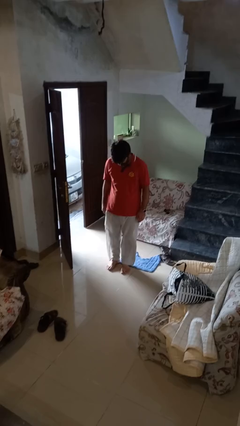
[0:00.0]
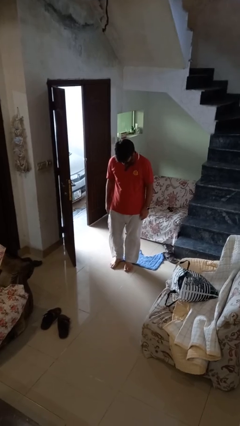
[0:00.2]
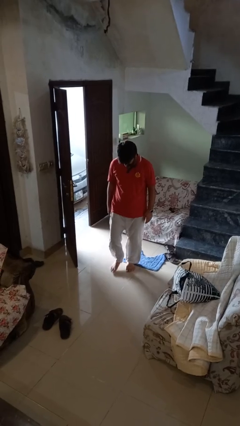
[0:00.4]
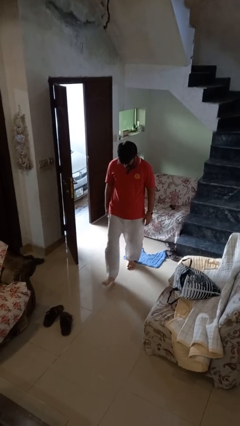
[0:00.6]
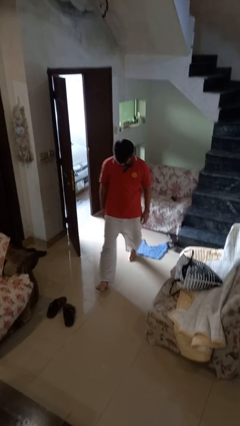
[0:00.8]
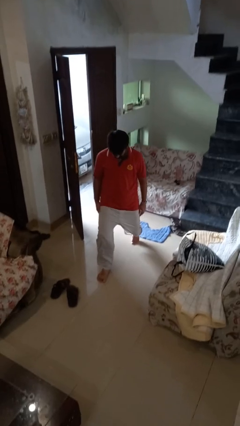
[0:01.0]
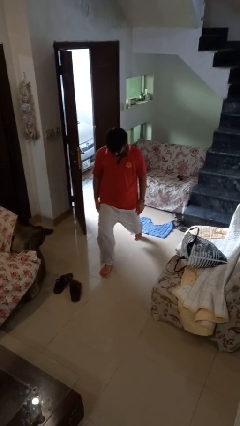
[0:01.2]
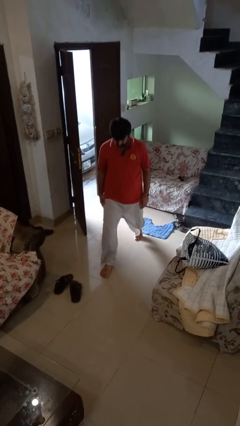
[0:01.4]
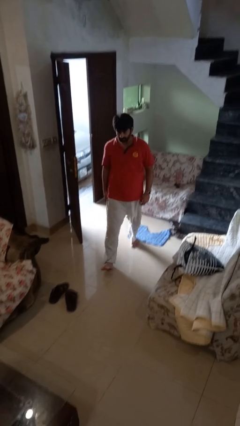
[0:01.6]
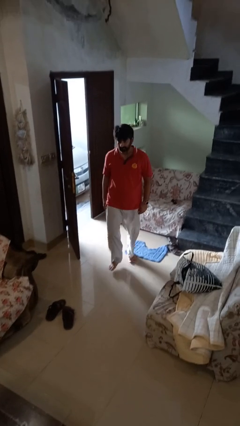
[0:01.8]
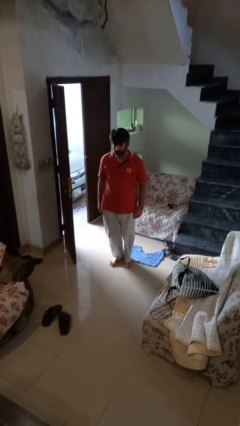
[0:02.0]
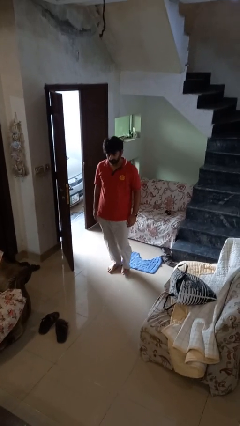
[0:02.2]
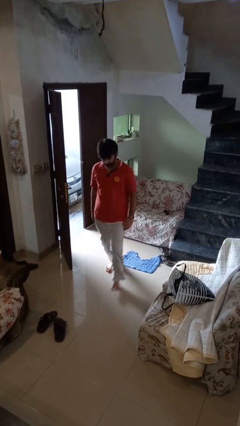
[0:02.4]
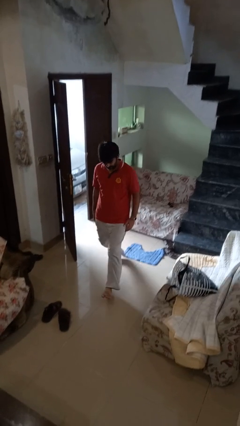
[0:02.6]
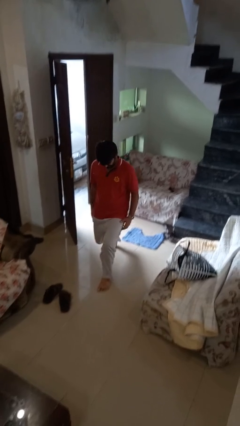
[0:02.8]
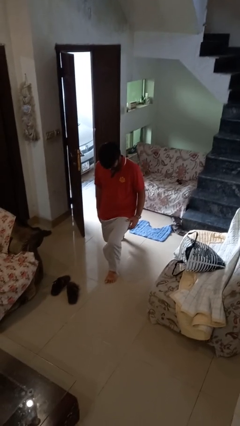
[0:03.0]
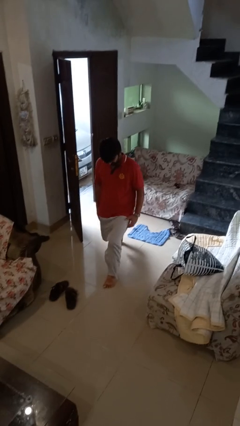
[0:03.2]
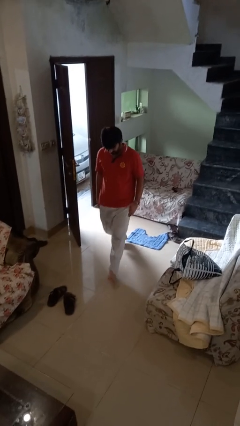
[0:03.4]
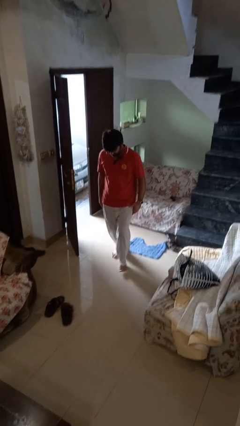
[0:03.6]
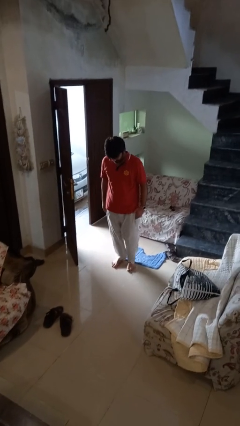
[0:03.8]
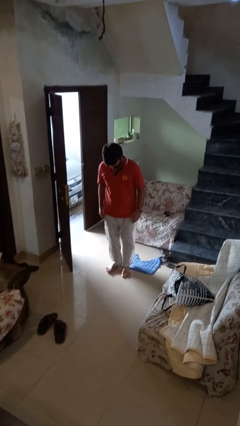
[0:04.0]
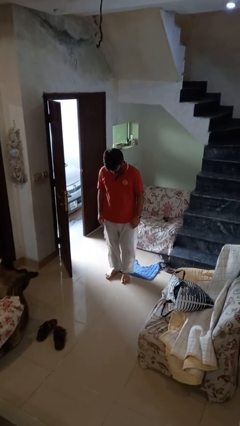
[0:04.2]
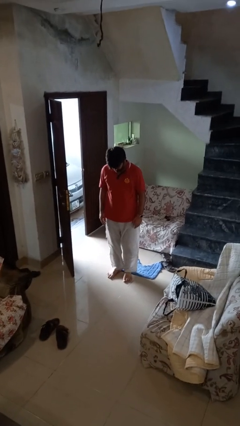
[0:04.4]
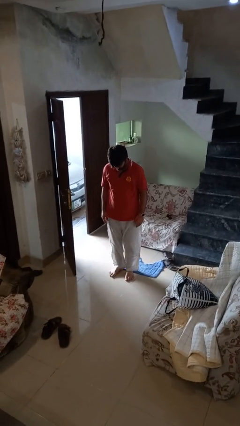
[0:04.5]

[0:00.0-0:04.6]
person exercises with lunges

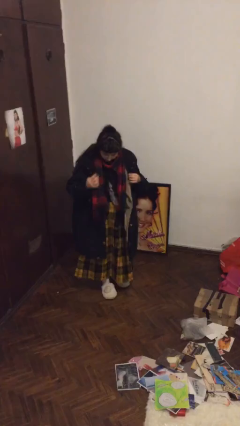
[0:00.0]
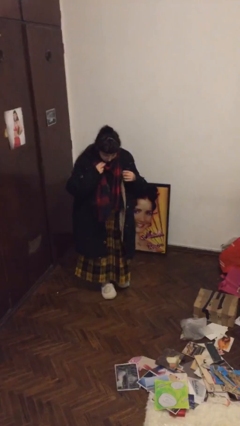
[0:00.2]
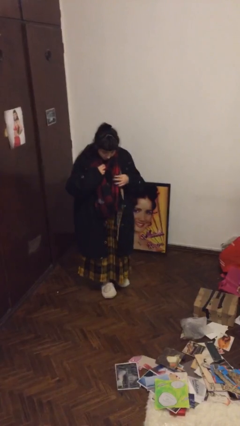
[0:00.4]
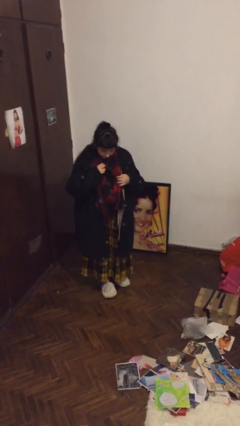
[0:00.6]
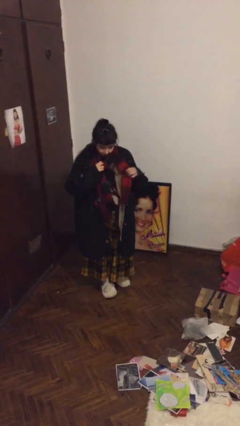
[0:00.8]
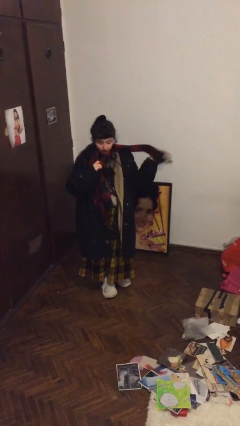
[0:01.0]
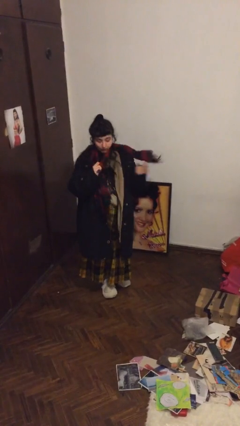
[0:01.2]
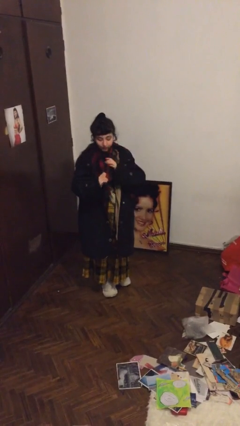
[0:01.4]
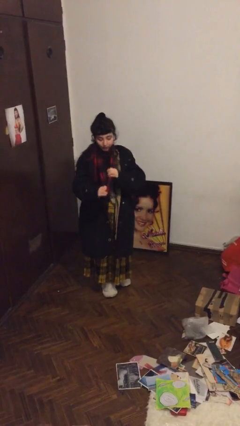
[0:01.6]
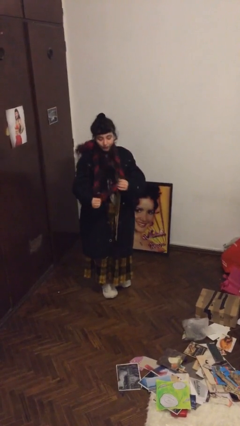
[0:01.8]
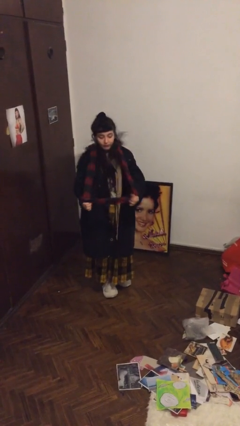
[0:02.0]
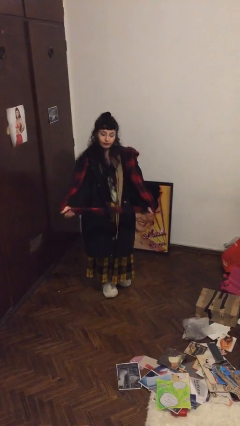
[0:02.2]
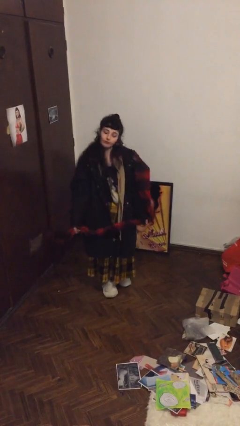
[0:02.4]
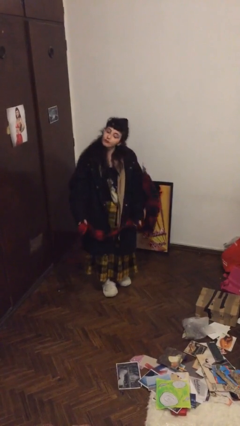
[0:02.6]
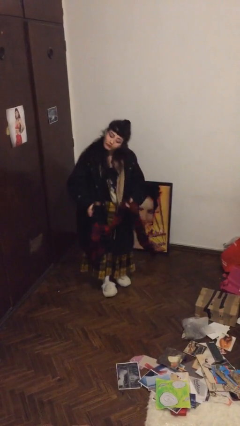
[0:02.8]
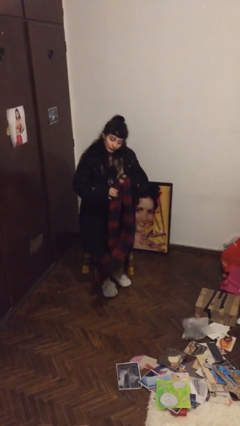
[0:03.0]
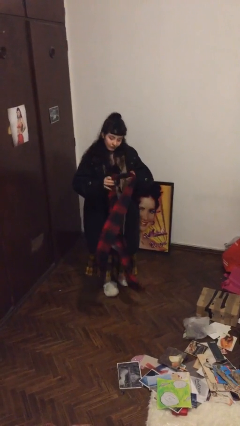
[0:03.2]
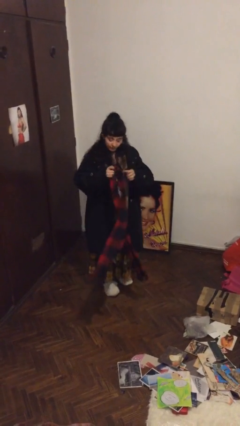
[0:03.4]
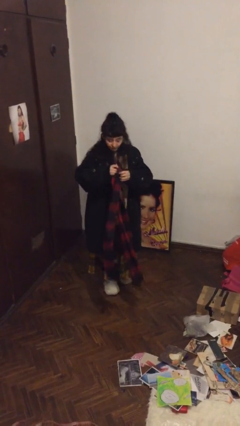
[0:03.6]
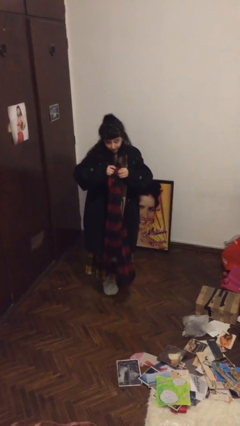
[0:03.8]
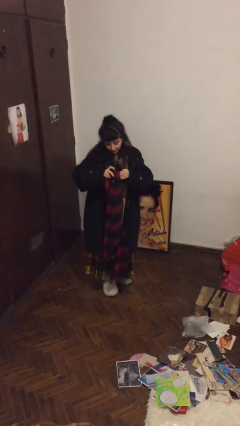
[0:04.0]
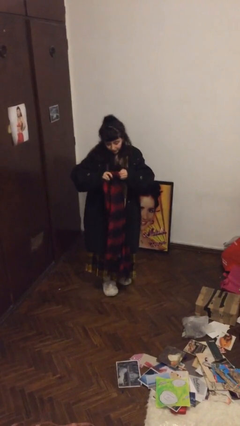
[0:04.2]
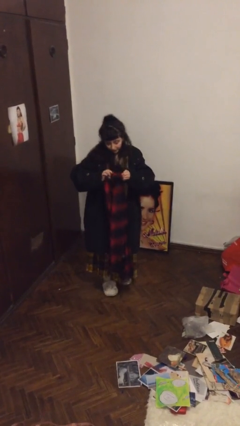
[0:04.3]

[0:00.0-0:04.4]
person takes off scarf

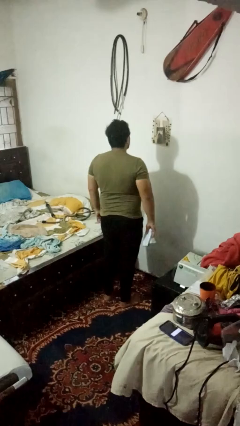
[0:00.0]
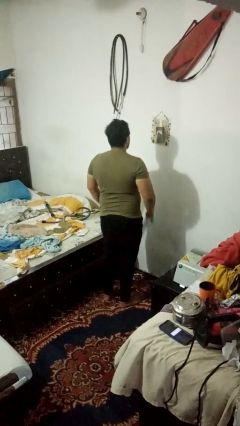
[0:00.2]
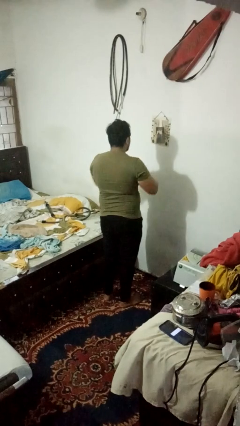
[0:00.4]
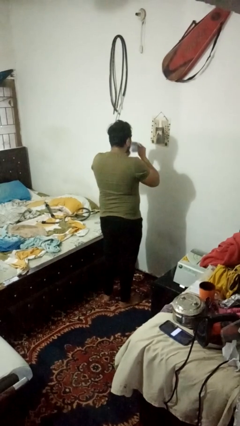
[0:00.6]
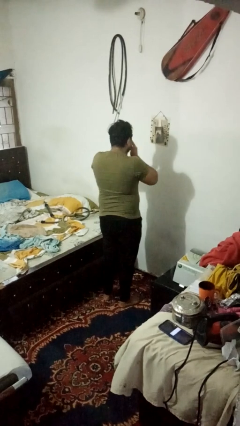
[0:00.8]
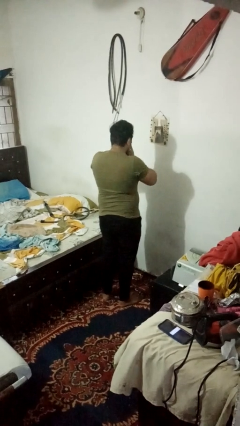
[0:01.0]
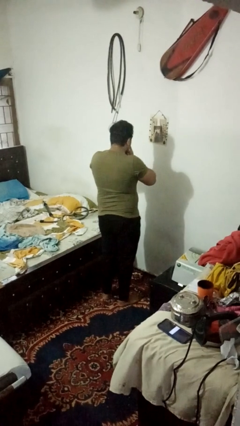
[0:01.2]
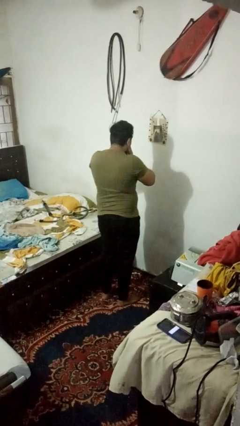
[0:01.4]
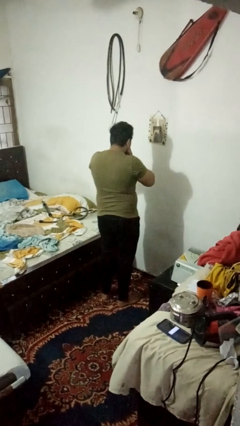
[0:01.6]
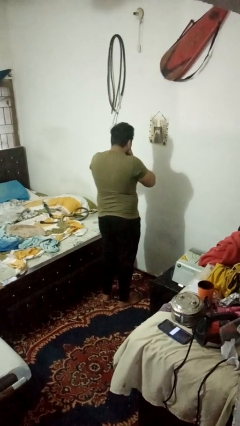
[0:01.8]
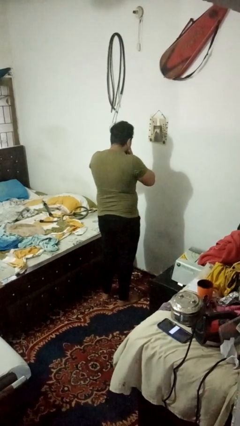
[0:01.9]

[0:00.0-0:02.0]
person blows nose

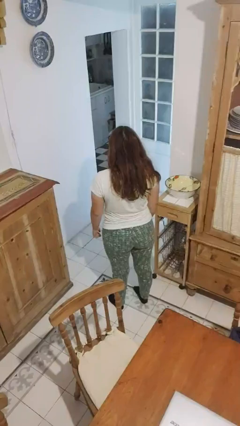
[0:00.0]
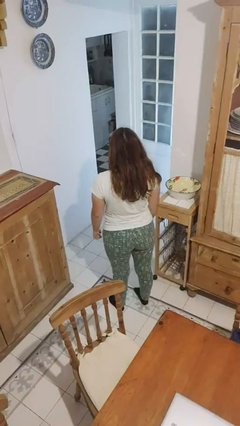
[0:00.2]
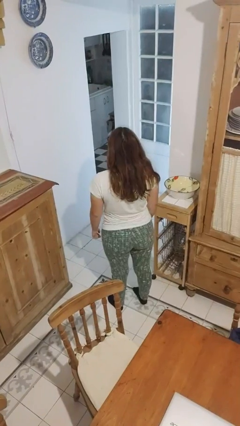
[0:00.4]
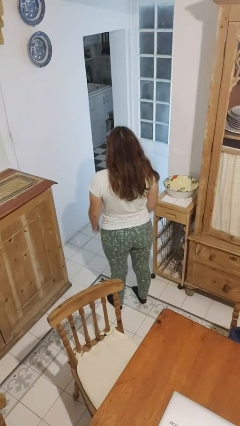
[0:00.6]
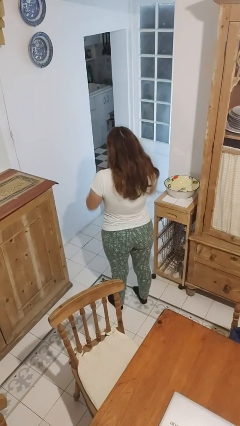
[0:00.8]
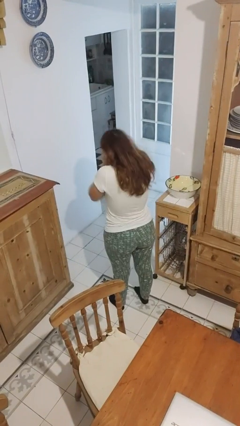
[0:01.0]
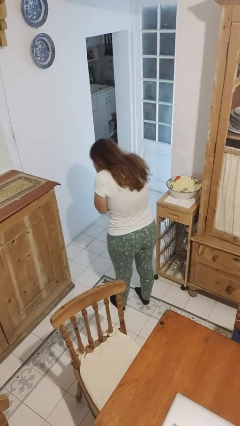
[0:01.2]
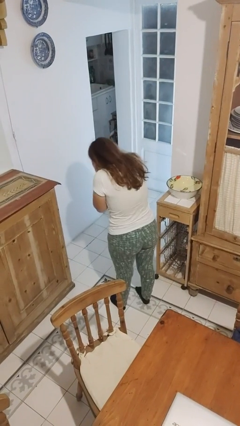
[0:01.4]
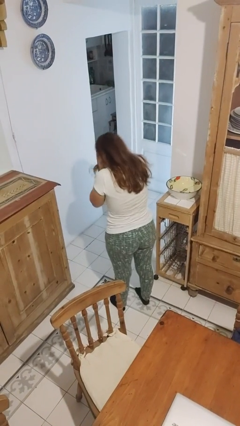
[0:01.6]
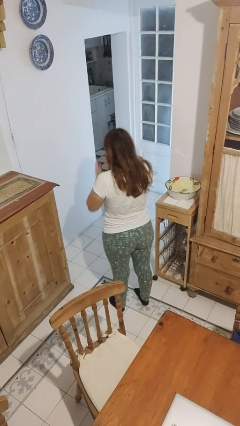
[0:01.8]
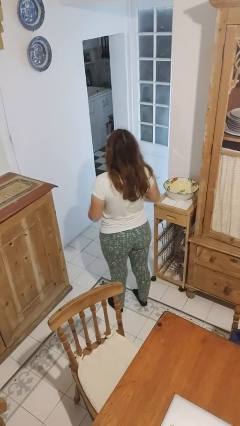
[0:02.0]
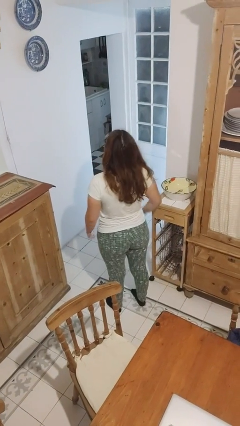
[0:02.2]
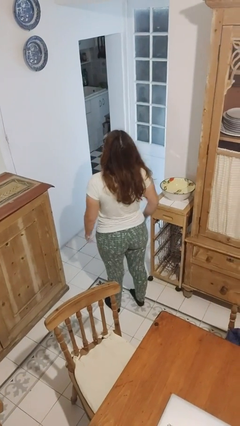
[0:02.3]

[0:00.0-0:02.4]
person sneezes into hand

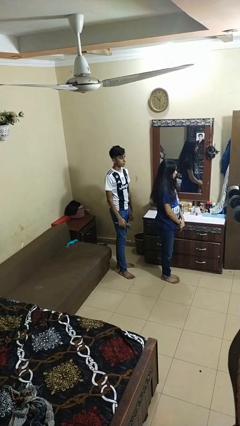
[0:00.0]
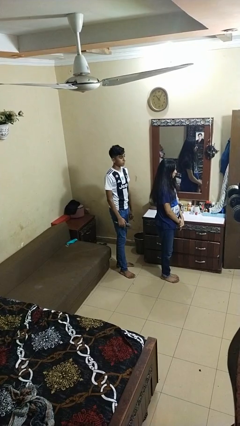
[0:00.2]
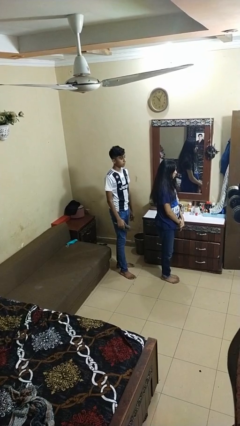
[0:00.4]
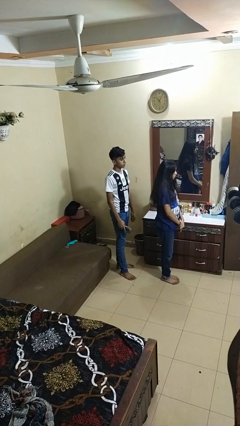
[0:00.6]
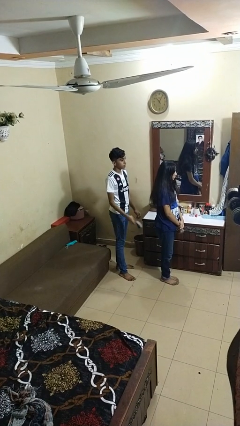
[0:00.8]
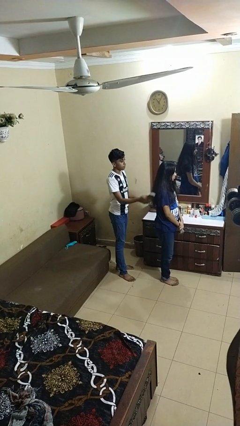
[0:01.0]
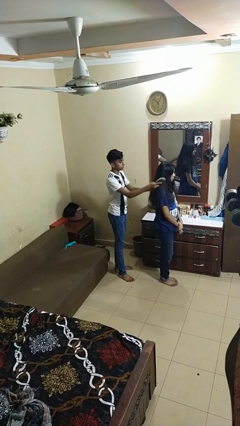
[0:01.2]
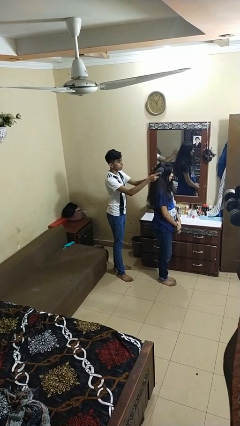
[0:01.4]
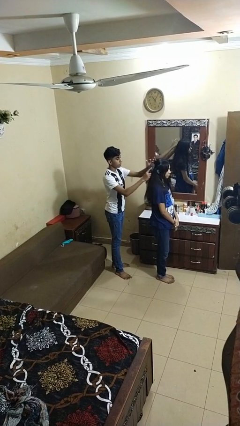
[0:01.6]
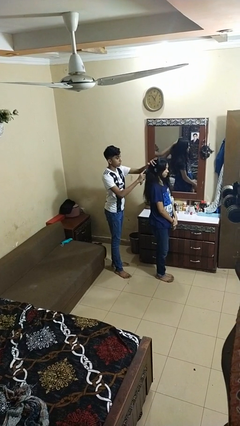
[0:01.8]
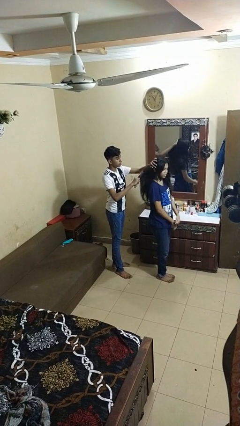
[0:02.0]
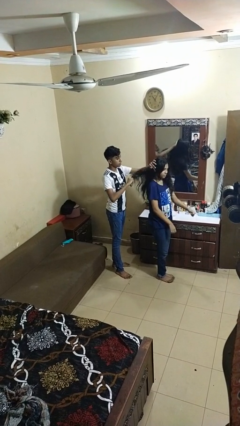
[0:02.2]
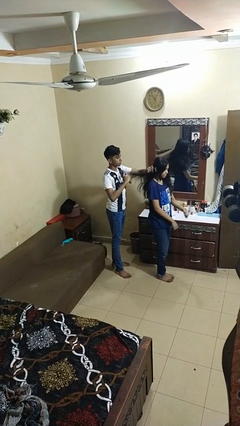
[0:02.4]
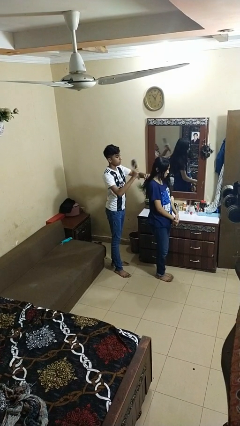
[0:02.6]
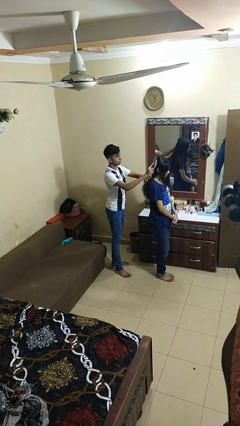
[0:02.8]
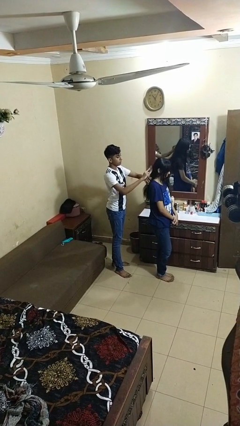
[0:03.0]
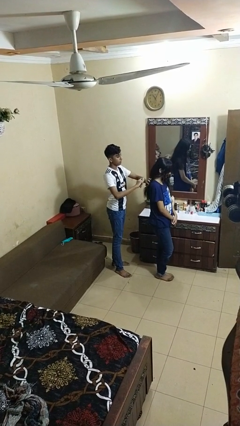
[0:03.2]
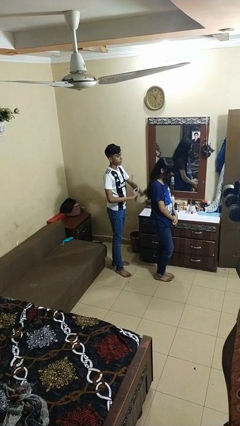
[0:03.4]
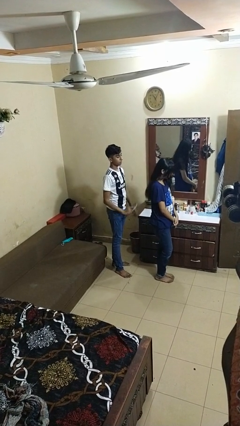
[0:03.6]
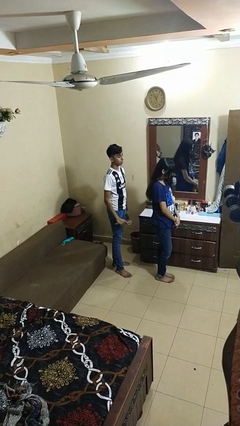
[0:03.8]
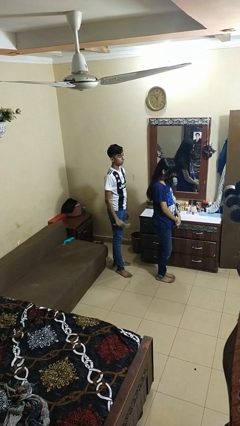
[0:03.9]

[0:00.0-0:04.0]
person brushes hair of person
